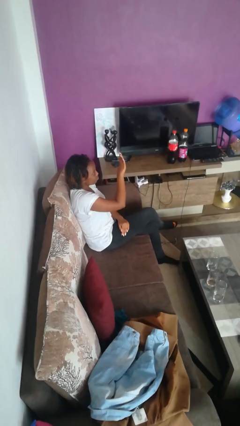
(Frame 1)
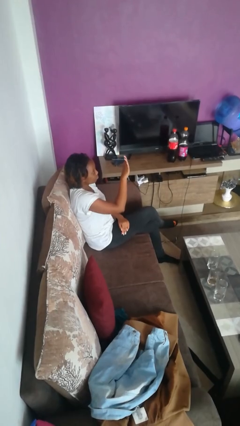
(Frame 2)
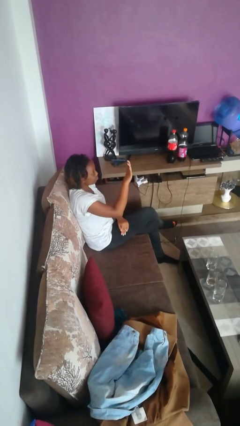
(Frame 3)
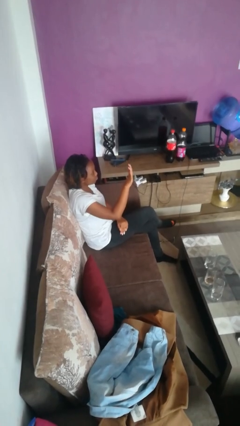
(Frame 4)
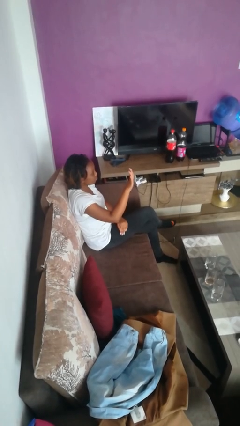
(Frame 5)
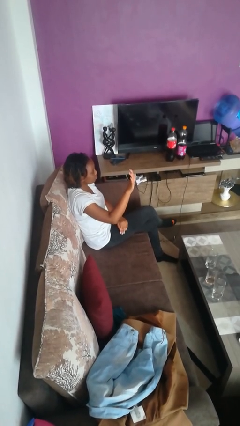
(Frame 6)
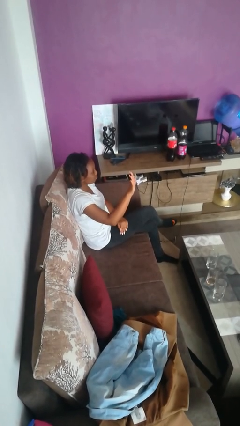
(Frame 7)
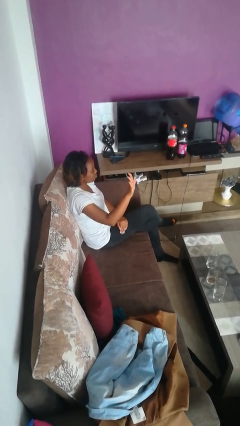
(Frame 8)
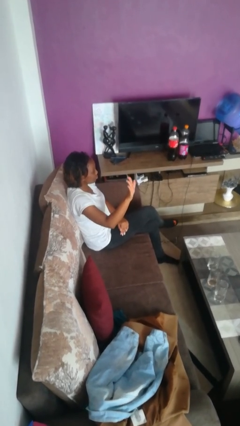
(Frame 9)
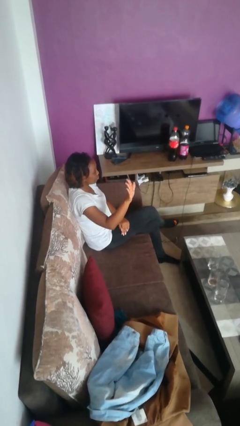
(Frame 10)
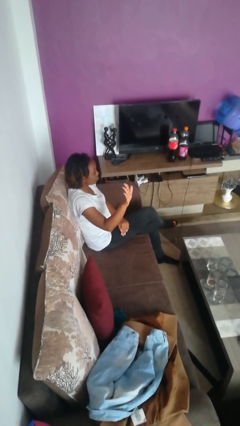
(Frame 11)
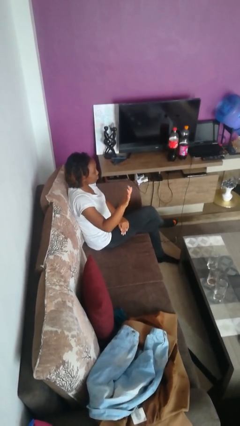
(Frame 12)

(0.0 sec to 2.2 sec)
person gestures swipe right

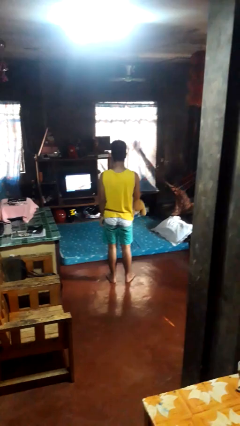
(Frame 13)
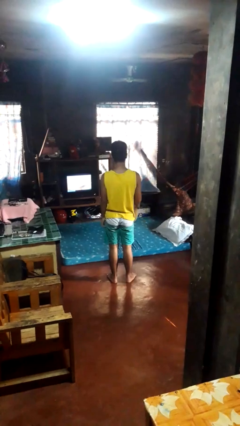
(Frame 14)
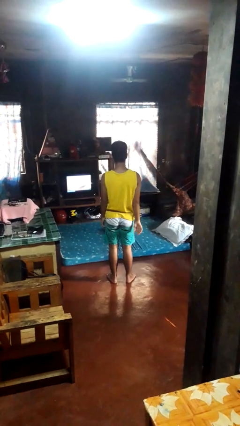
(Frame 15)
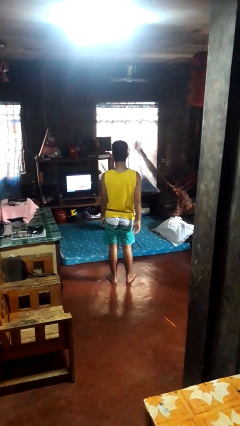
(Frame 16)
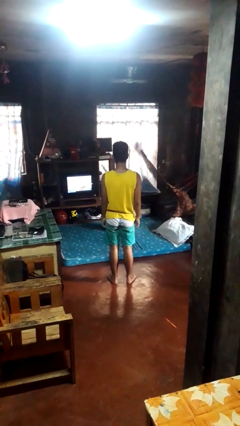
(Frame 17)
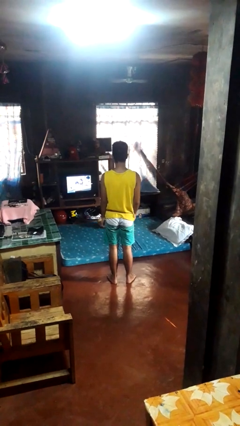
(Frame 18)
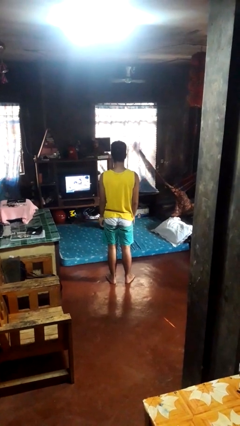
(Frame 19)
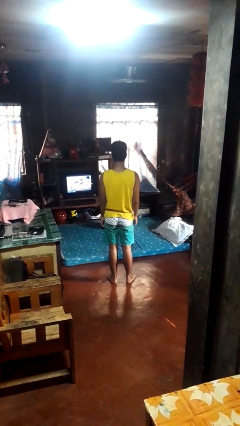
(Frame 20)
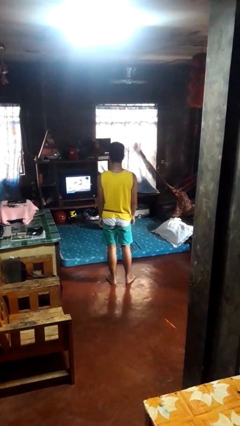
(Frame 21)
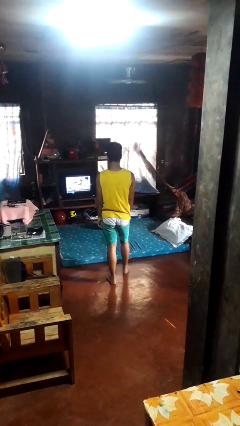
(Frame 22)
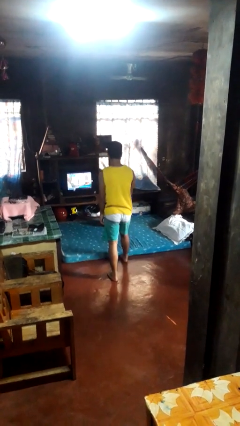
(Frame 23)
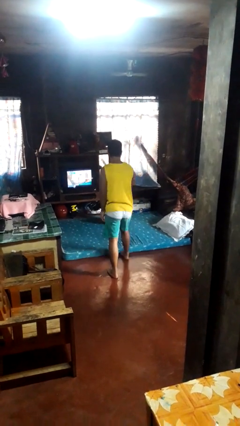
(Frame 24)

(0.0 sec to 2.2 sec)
person throws object on bed

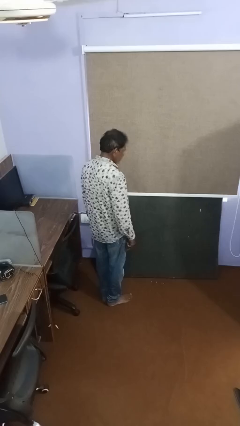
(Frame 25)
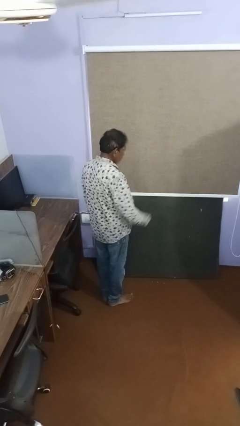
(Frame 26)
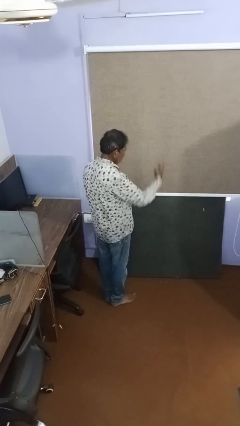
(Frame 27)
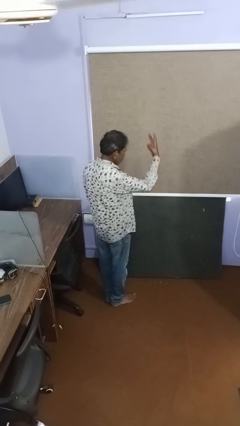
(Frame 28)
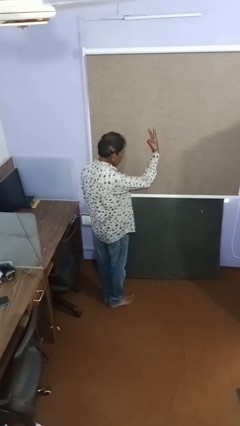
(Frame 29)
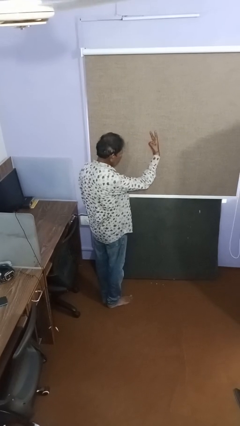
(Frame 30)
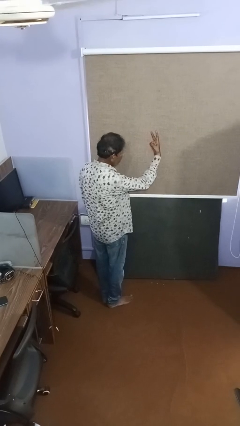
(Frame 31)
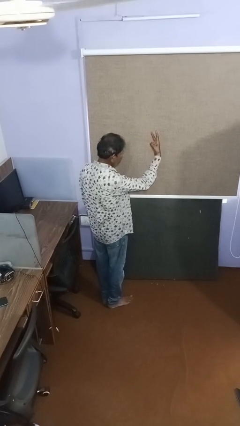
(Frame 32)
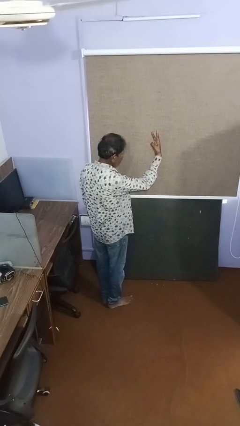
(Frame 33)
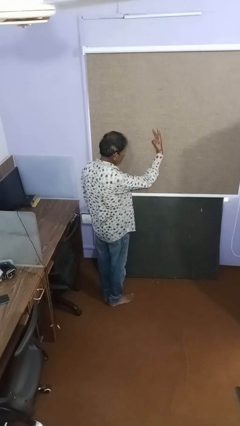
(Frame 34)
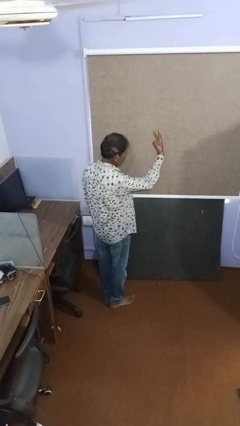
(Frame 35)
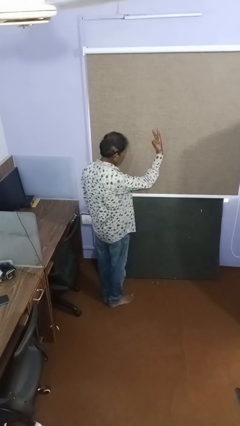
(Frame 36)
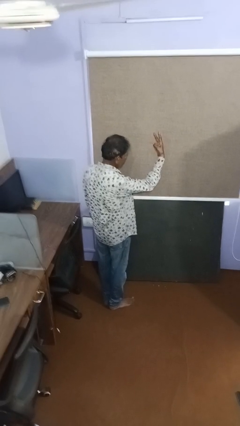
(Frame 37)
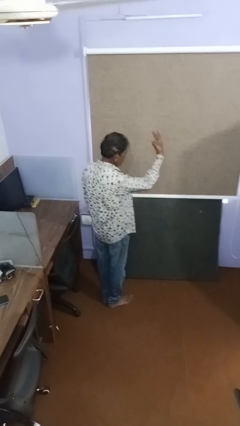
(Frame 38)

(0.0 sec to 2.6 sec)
person gestures peace

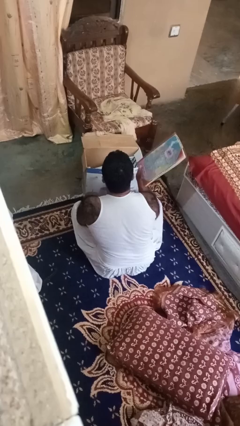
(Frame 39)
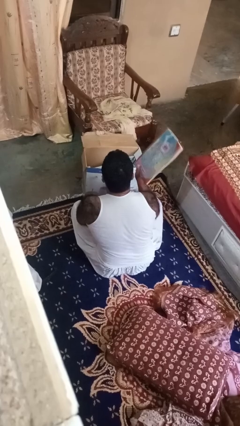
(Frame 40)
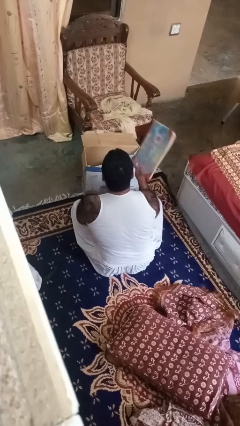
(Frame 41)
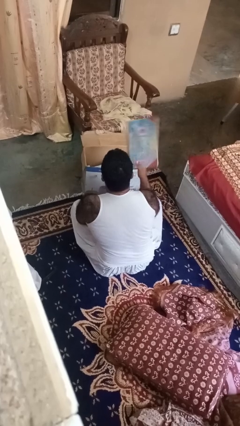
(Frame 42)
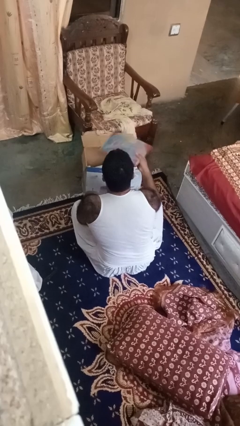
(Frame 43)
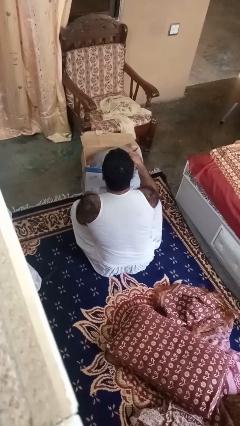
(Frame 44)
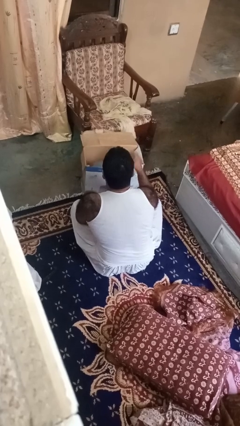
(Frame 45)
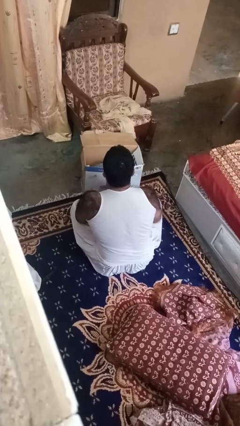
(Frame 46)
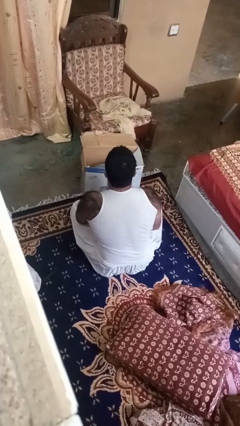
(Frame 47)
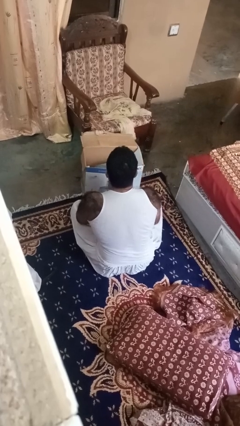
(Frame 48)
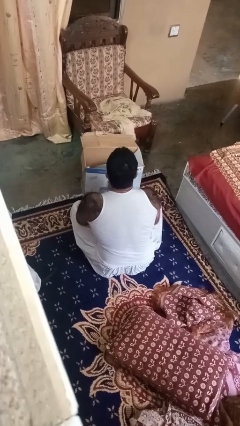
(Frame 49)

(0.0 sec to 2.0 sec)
person puts object into box

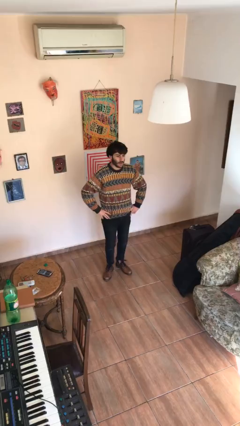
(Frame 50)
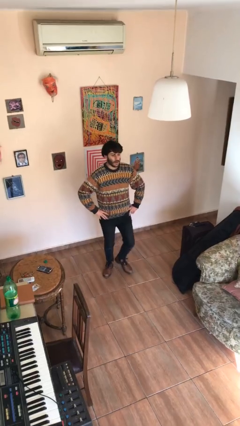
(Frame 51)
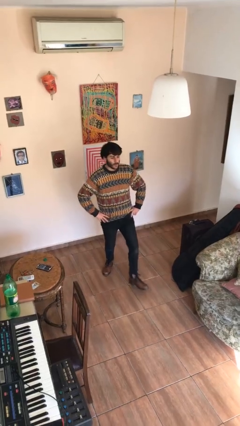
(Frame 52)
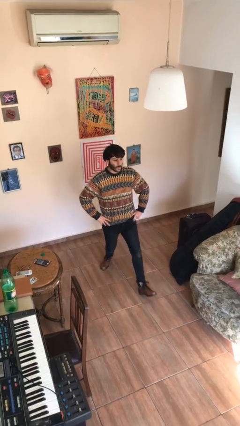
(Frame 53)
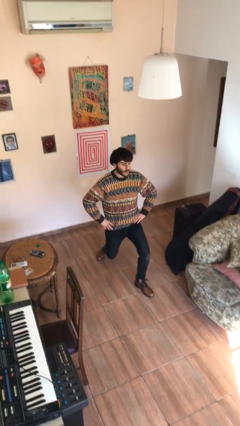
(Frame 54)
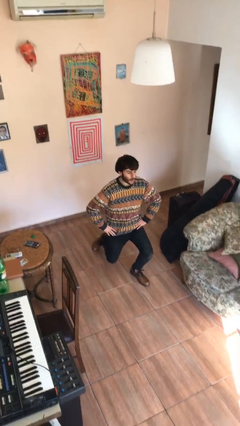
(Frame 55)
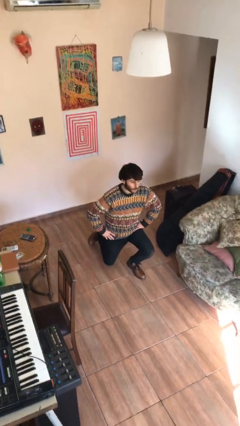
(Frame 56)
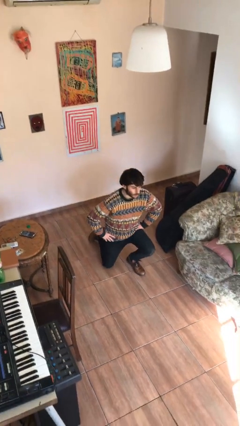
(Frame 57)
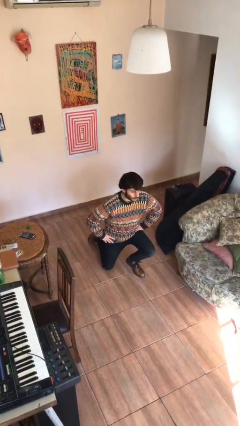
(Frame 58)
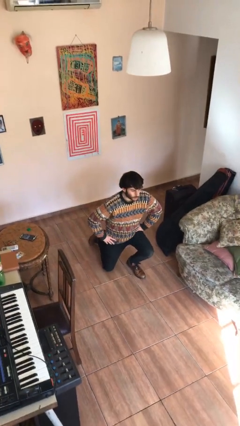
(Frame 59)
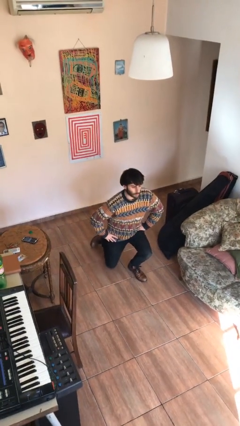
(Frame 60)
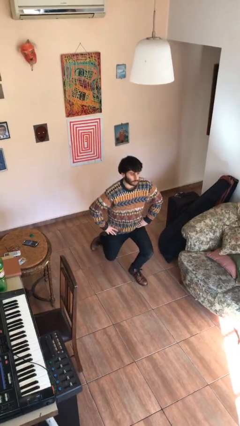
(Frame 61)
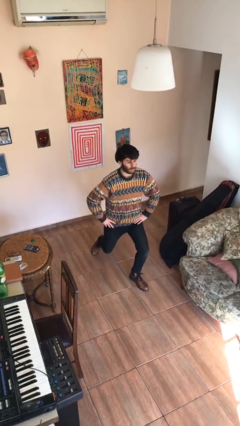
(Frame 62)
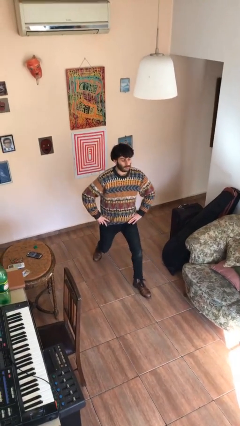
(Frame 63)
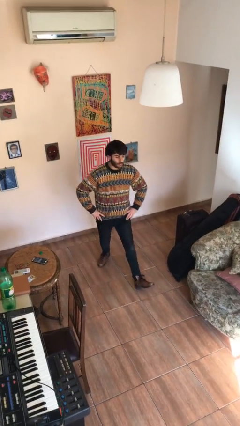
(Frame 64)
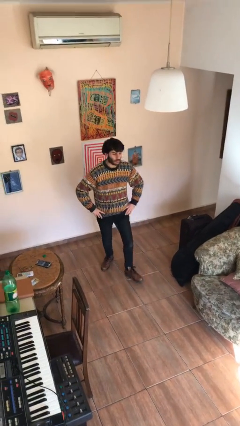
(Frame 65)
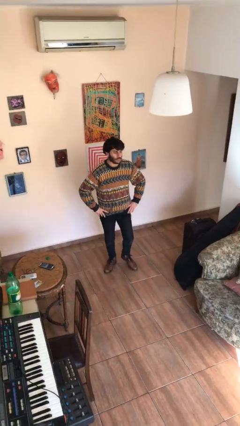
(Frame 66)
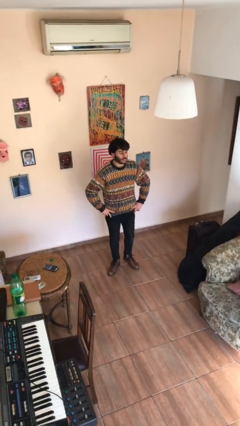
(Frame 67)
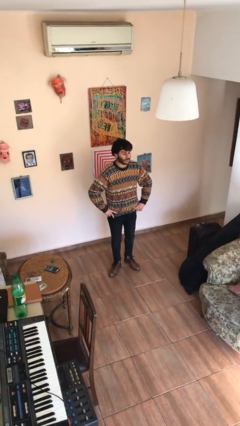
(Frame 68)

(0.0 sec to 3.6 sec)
person exercises with lunges

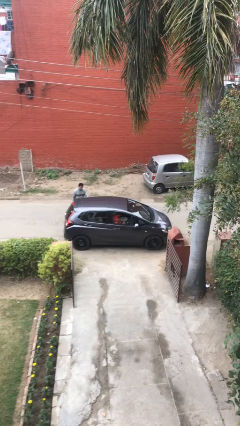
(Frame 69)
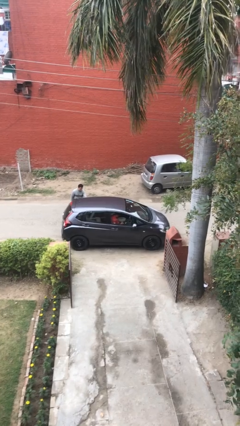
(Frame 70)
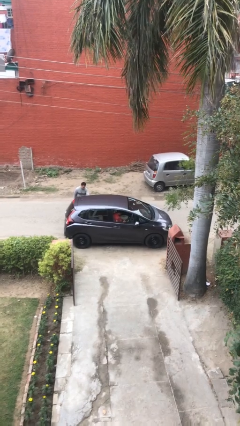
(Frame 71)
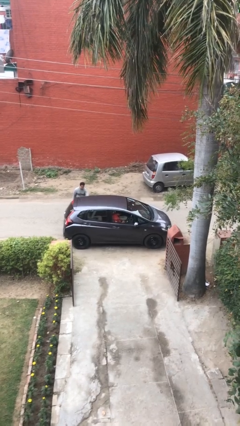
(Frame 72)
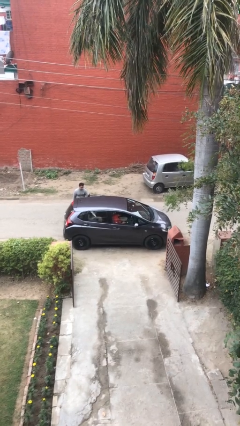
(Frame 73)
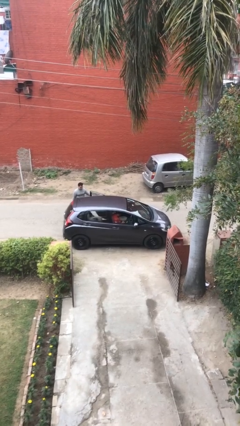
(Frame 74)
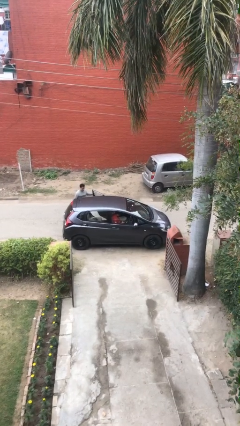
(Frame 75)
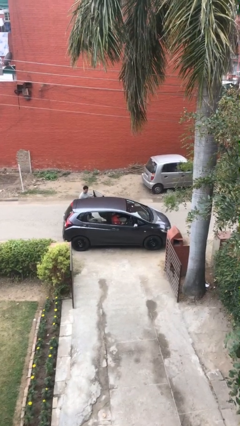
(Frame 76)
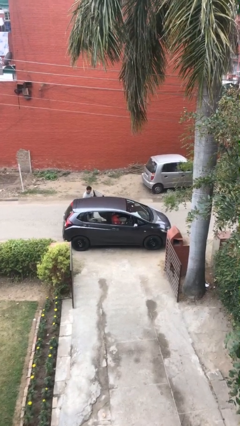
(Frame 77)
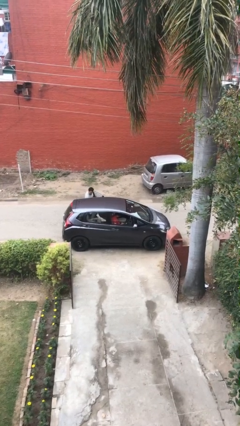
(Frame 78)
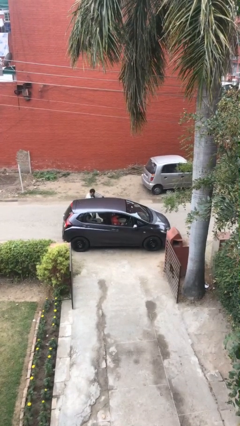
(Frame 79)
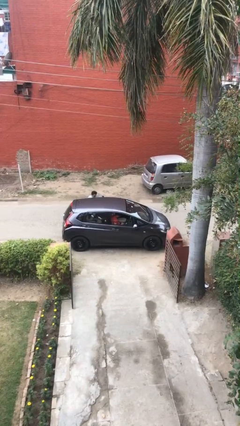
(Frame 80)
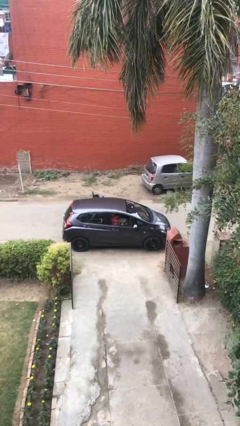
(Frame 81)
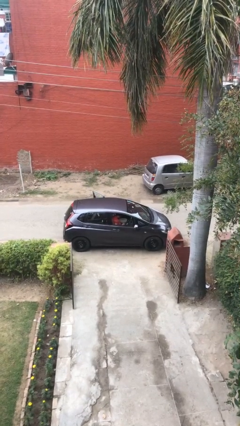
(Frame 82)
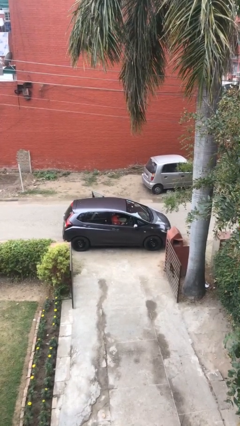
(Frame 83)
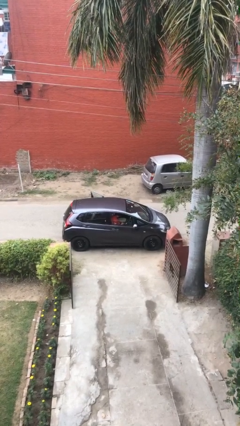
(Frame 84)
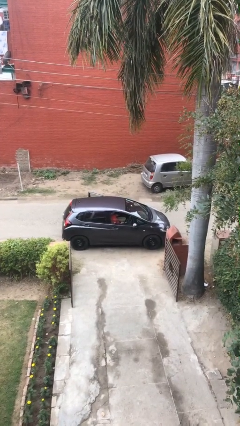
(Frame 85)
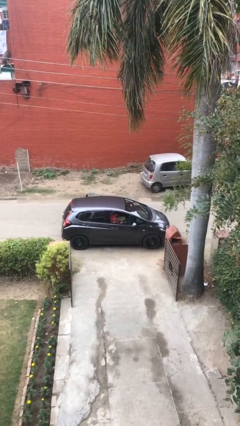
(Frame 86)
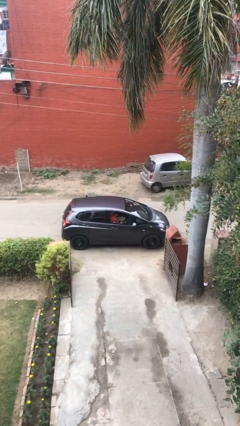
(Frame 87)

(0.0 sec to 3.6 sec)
car picks up person

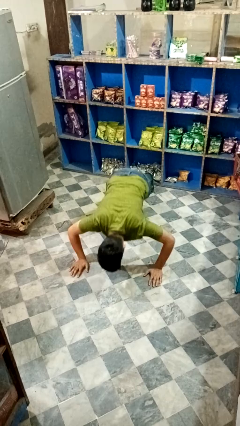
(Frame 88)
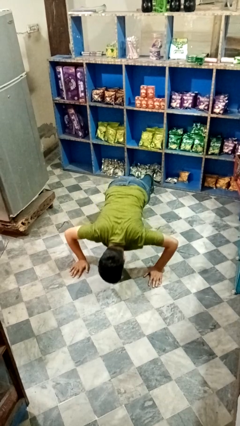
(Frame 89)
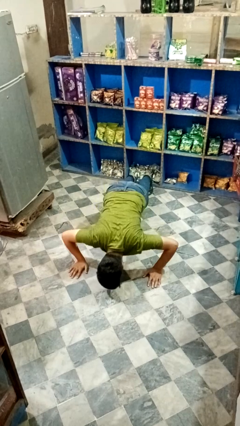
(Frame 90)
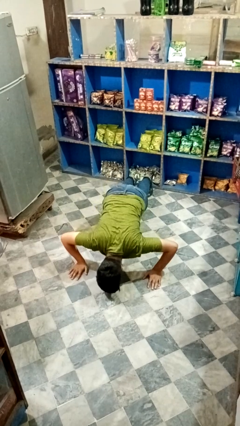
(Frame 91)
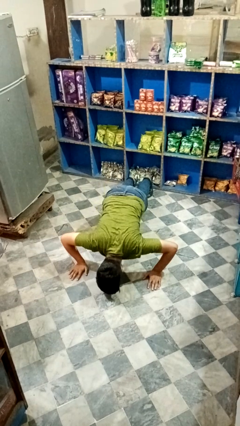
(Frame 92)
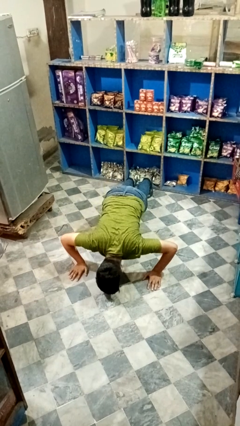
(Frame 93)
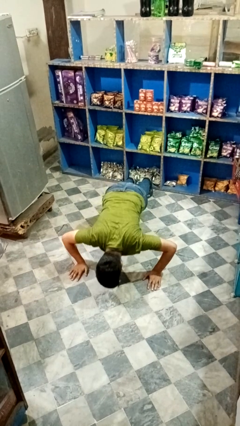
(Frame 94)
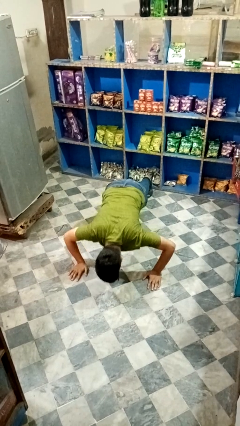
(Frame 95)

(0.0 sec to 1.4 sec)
person exercises with pushup
